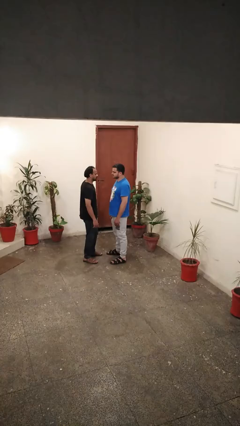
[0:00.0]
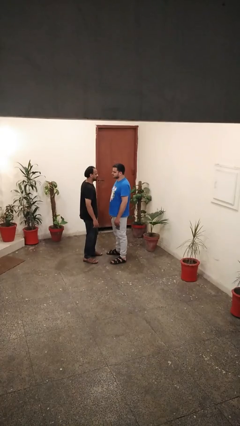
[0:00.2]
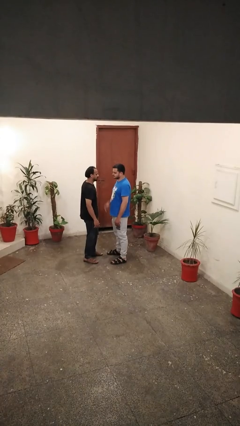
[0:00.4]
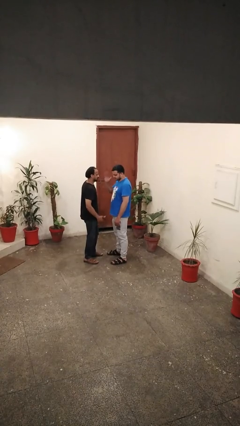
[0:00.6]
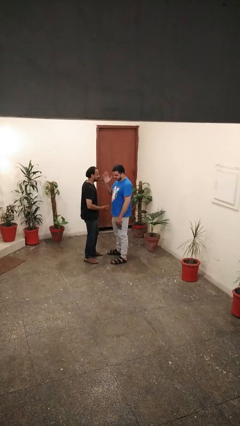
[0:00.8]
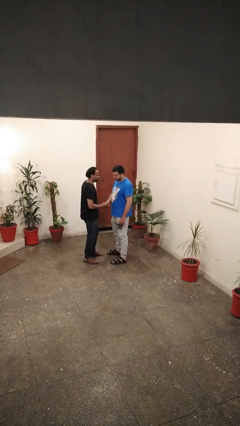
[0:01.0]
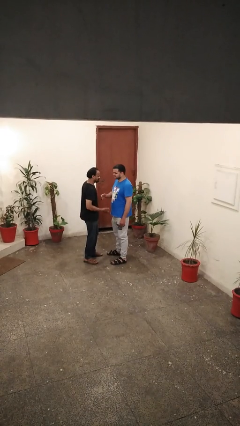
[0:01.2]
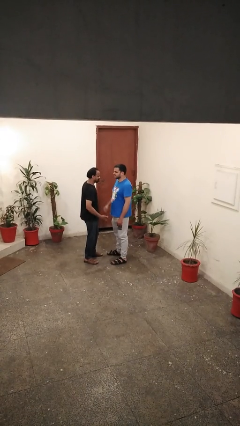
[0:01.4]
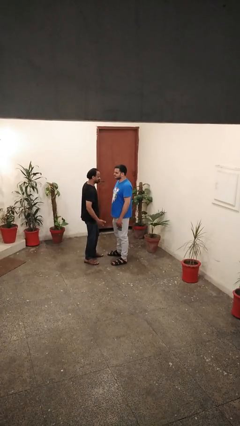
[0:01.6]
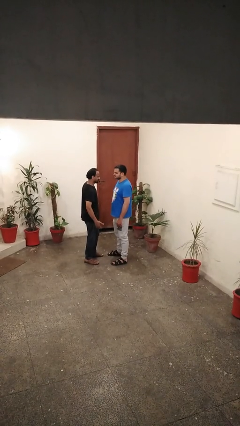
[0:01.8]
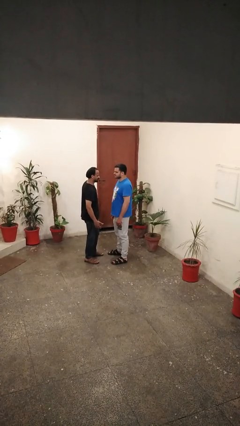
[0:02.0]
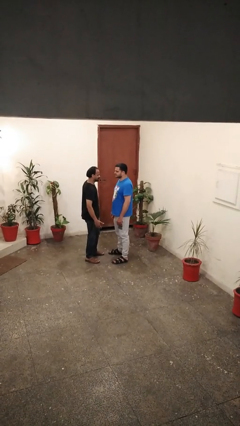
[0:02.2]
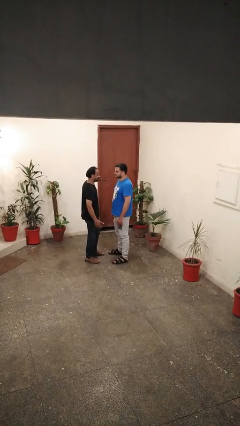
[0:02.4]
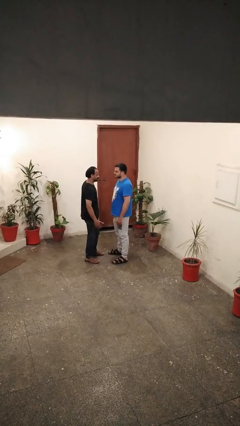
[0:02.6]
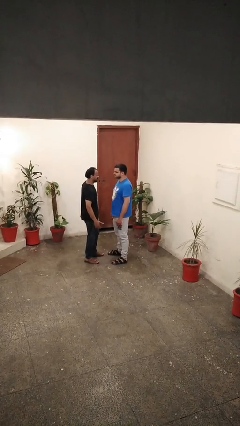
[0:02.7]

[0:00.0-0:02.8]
person highfives hand

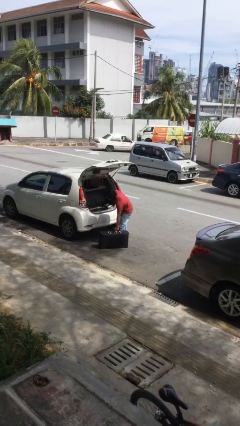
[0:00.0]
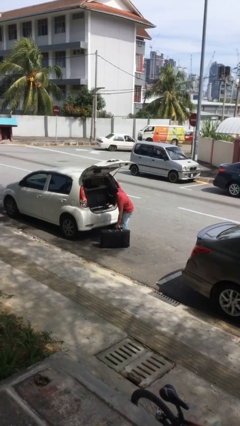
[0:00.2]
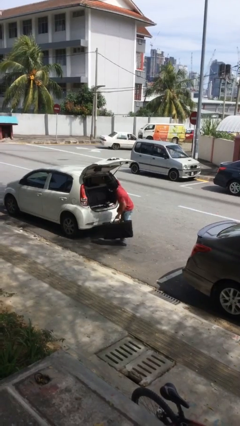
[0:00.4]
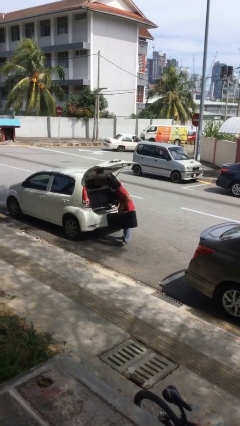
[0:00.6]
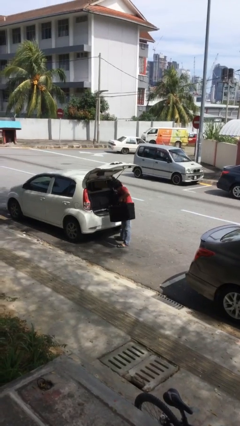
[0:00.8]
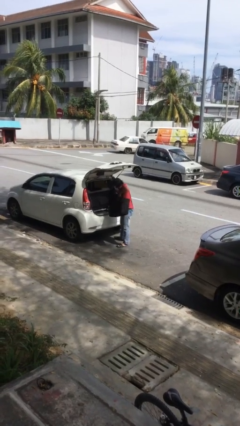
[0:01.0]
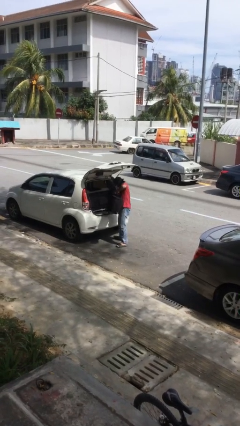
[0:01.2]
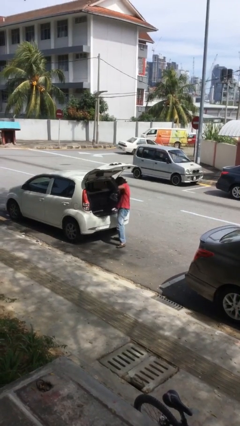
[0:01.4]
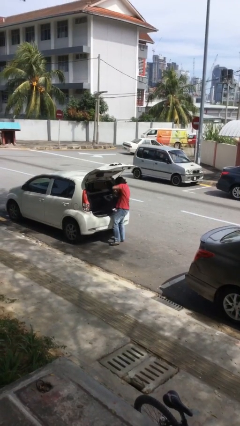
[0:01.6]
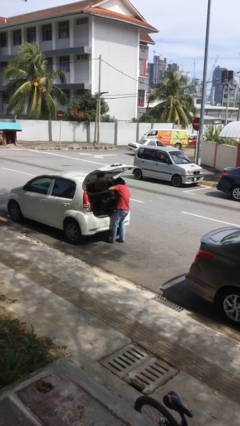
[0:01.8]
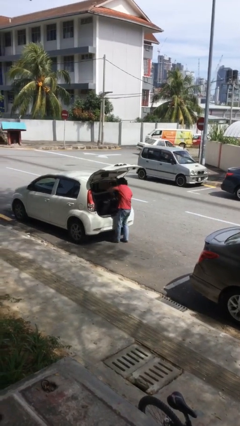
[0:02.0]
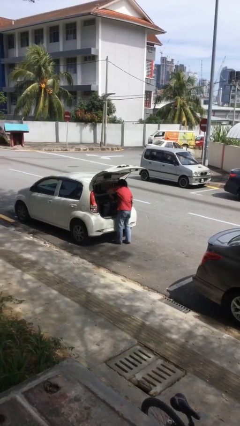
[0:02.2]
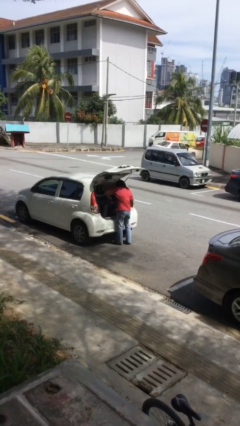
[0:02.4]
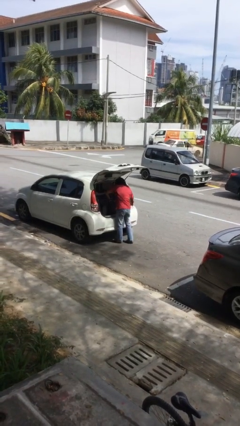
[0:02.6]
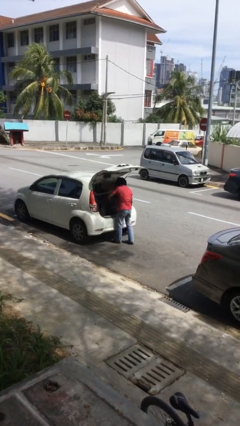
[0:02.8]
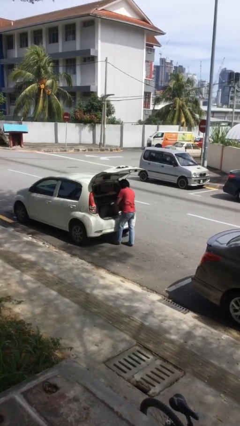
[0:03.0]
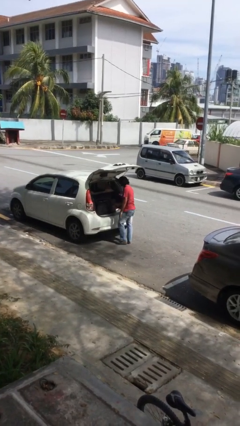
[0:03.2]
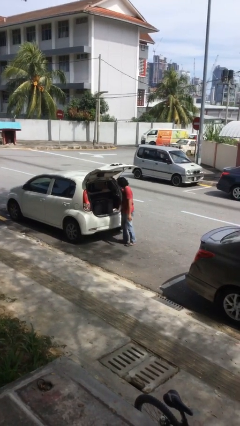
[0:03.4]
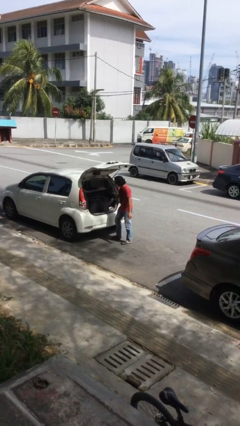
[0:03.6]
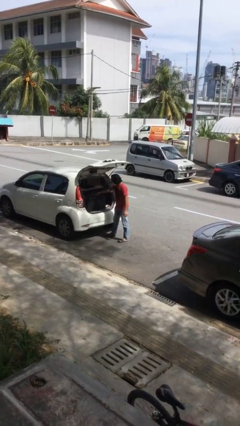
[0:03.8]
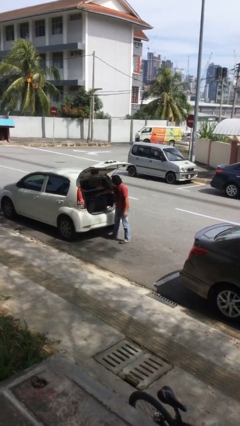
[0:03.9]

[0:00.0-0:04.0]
person loads car

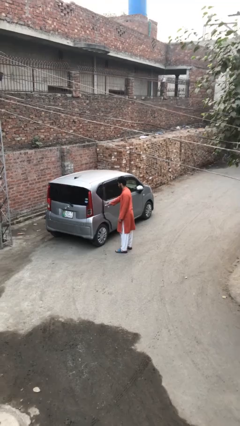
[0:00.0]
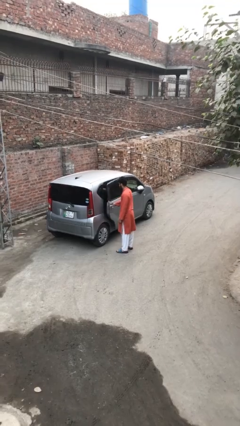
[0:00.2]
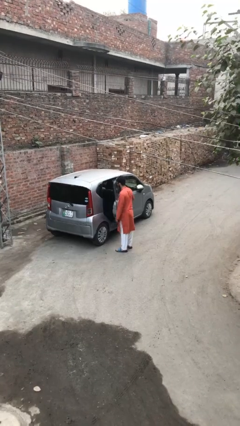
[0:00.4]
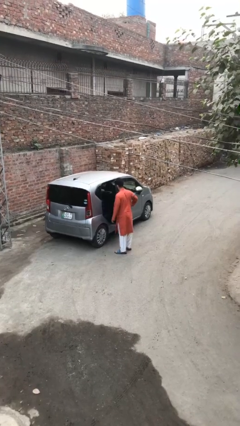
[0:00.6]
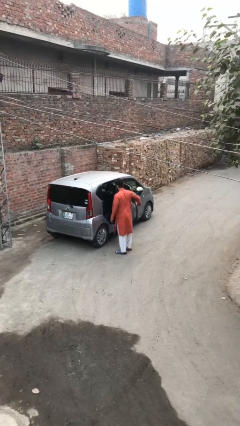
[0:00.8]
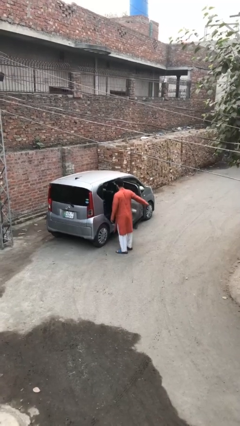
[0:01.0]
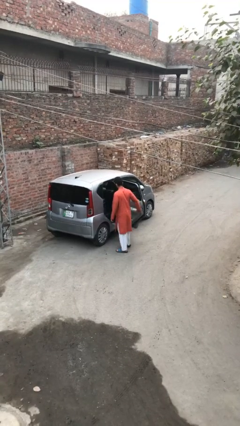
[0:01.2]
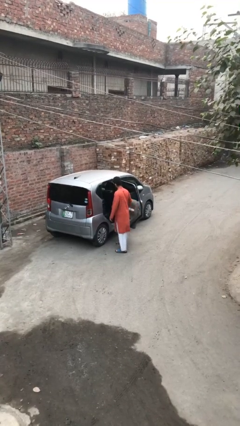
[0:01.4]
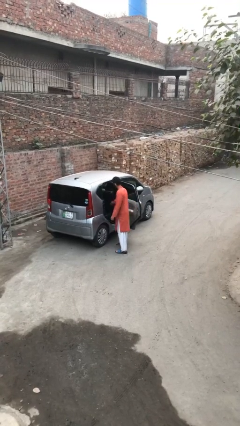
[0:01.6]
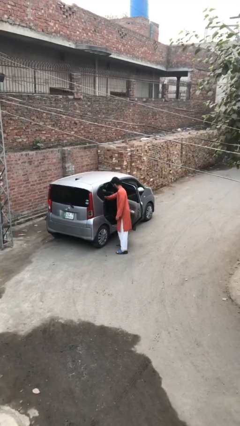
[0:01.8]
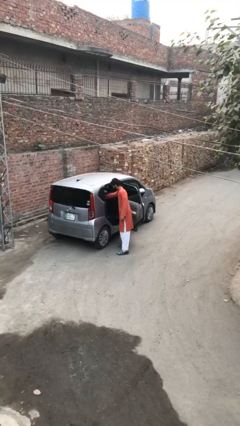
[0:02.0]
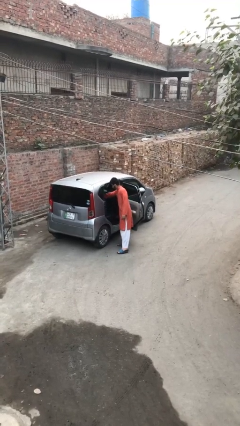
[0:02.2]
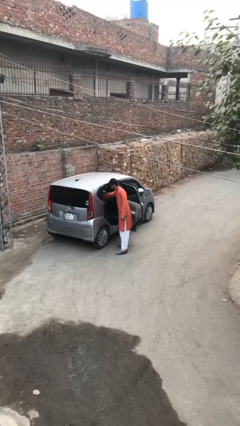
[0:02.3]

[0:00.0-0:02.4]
person opens car door

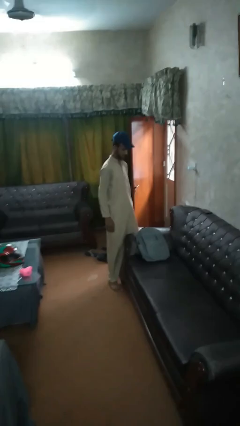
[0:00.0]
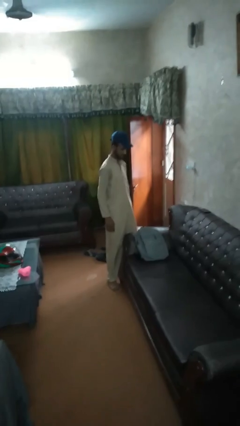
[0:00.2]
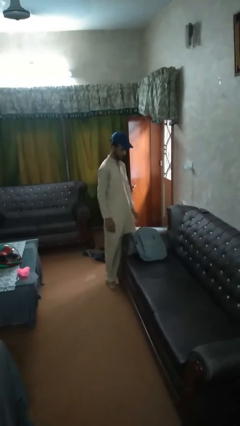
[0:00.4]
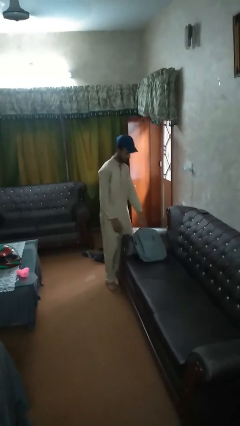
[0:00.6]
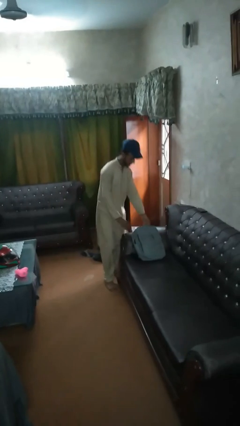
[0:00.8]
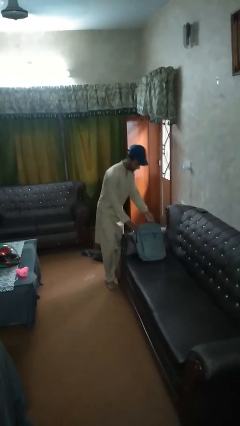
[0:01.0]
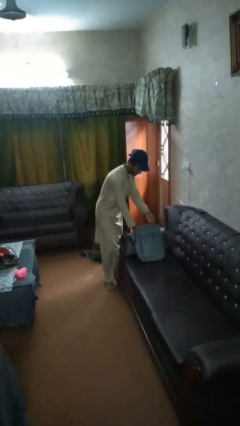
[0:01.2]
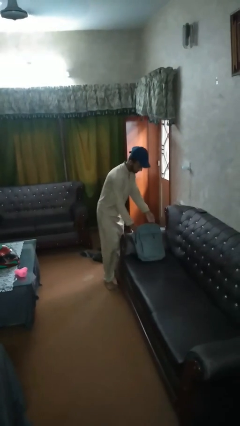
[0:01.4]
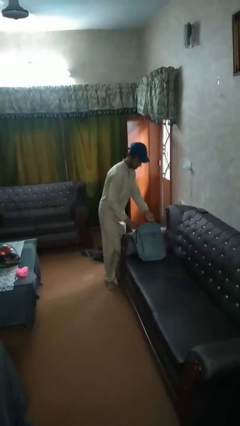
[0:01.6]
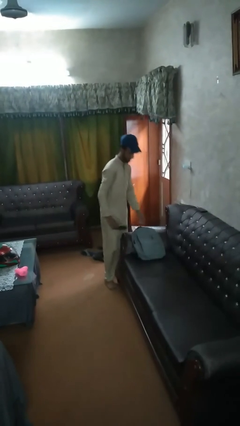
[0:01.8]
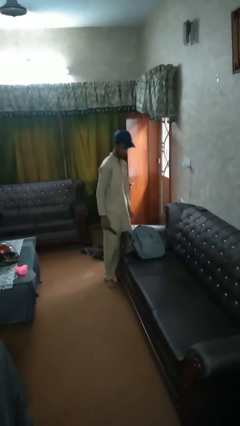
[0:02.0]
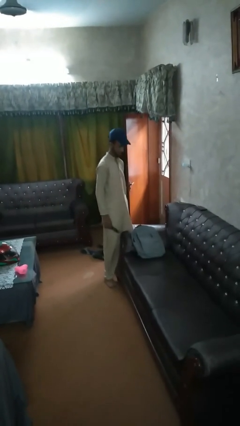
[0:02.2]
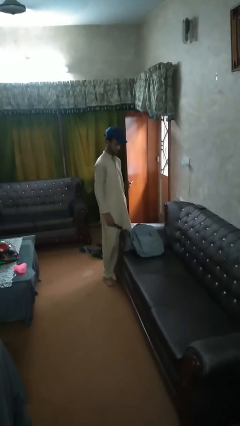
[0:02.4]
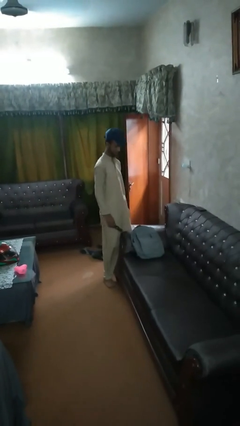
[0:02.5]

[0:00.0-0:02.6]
person takes object from bag

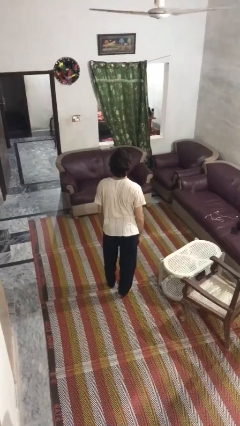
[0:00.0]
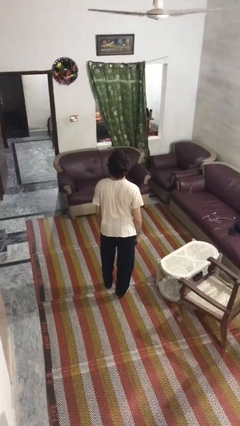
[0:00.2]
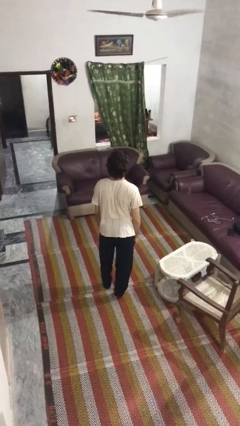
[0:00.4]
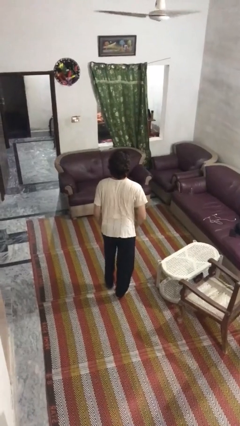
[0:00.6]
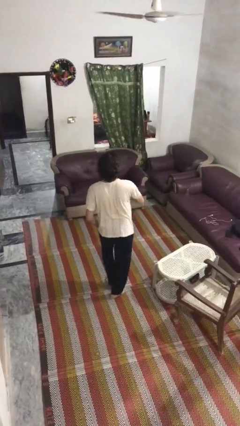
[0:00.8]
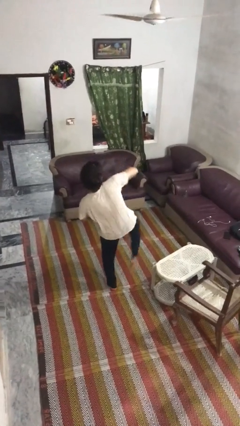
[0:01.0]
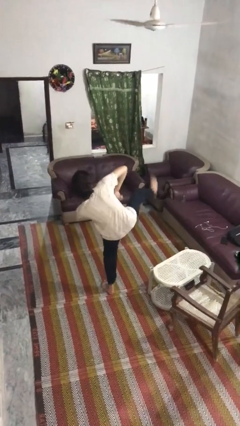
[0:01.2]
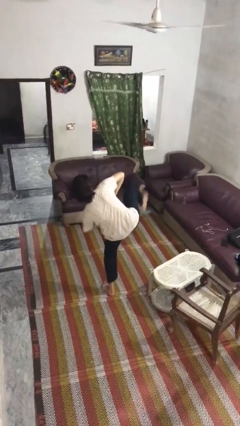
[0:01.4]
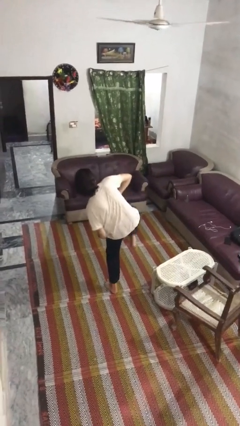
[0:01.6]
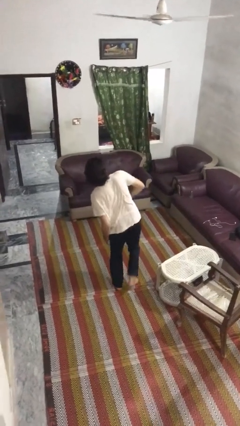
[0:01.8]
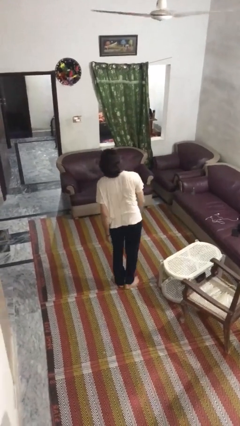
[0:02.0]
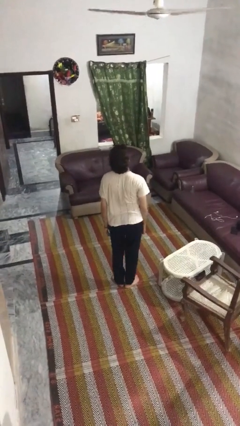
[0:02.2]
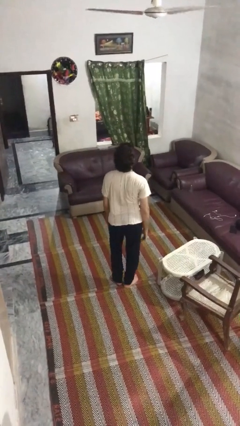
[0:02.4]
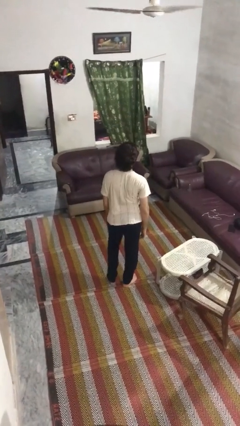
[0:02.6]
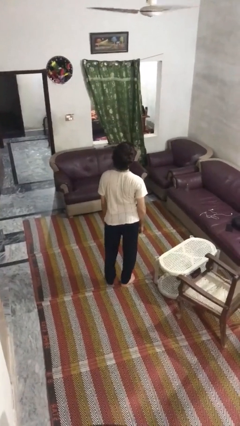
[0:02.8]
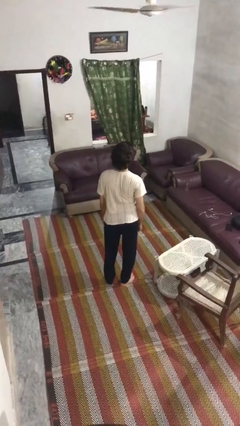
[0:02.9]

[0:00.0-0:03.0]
person karate kicks

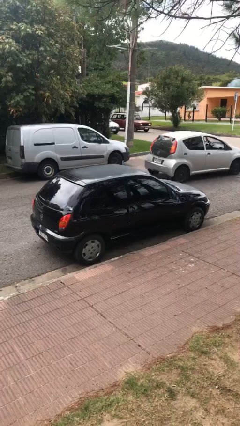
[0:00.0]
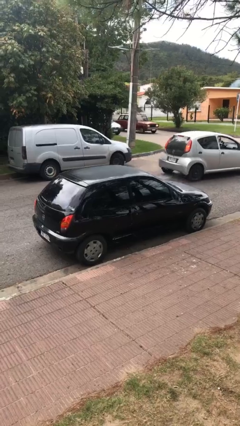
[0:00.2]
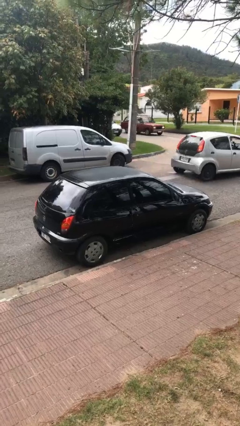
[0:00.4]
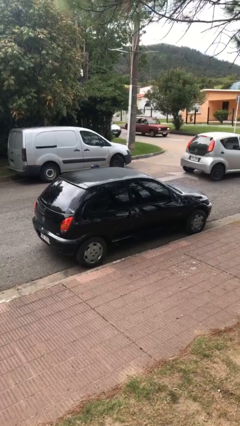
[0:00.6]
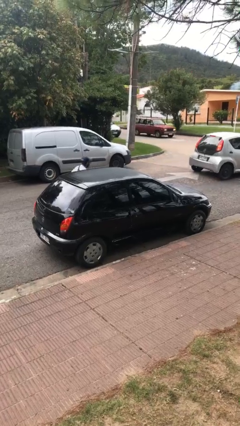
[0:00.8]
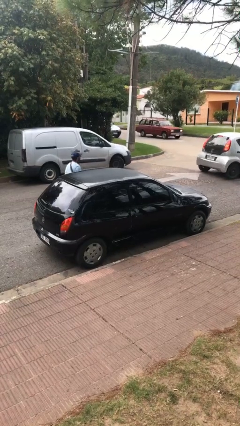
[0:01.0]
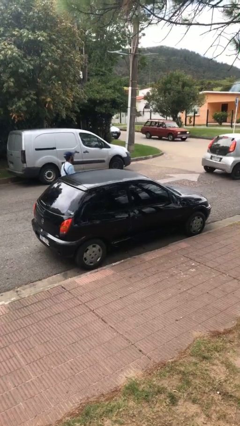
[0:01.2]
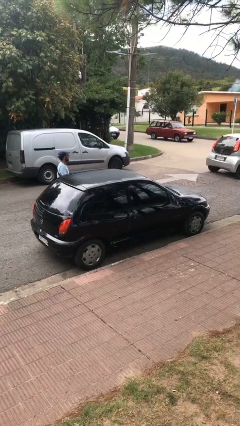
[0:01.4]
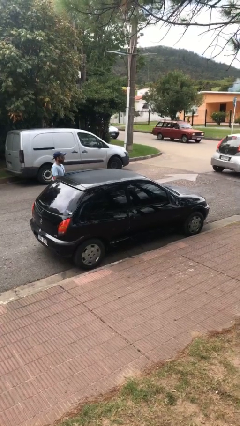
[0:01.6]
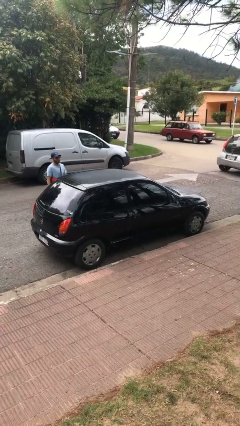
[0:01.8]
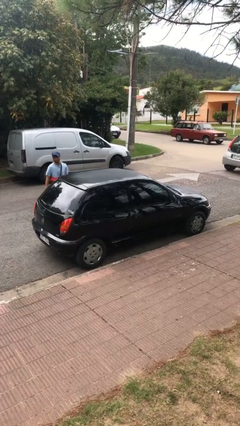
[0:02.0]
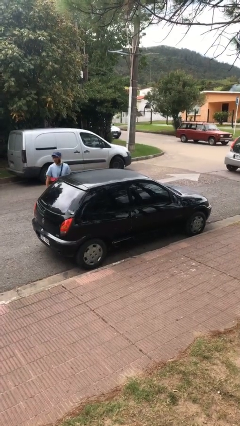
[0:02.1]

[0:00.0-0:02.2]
car drops off person
